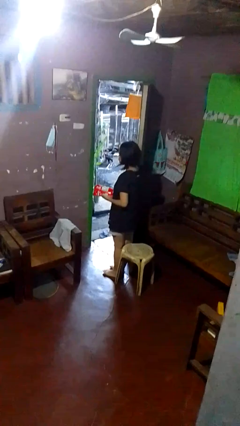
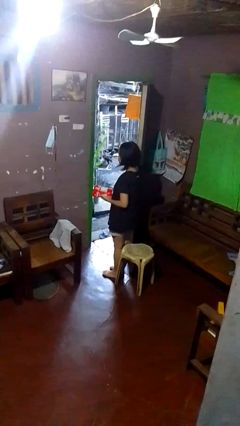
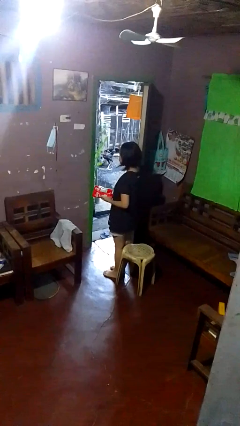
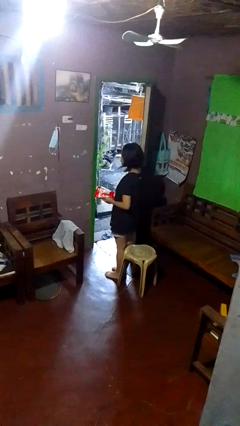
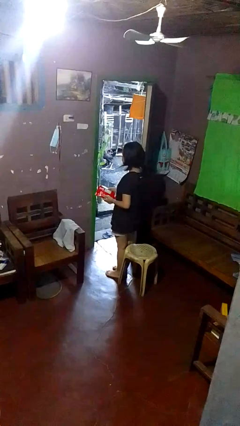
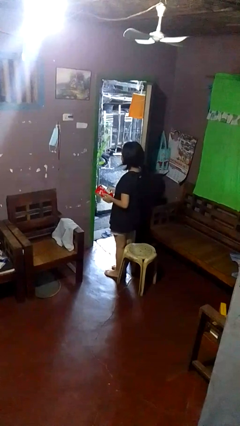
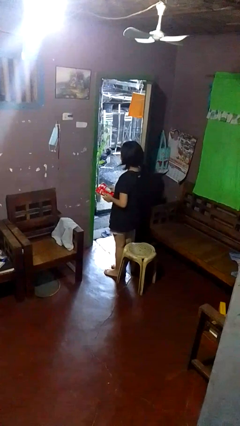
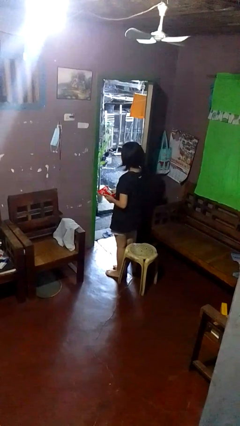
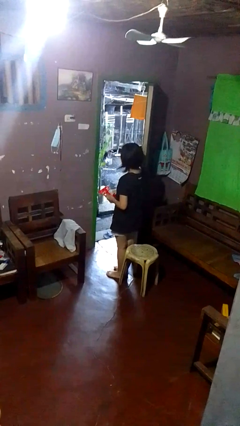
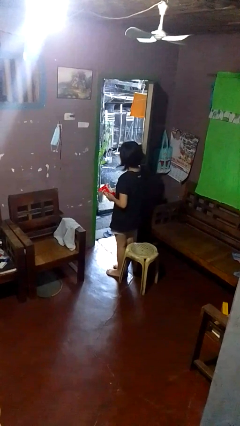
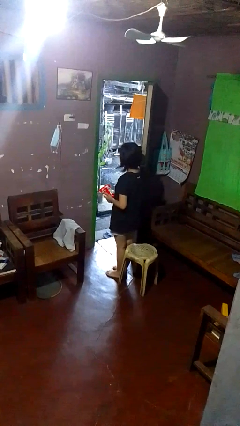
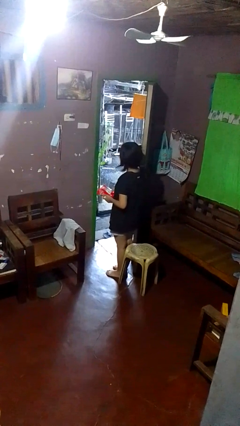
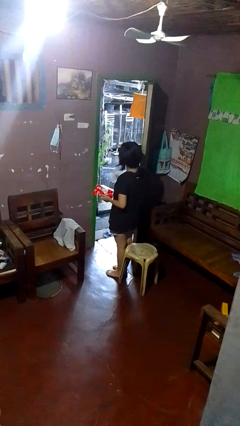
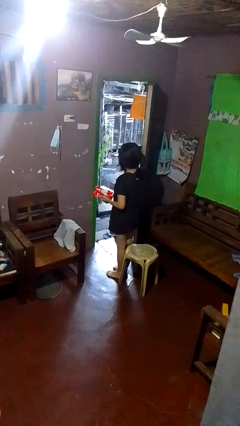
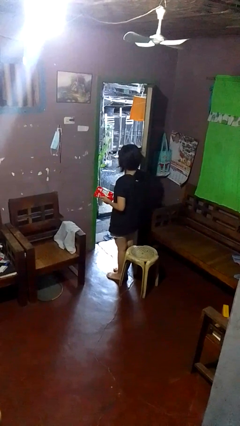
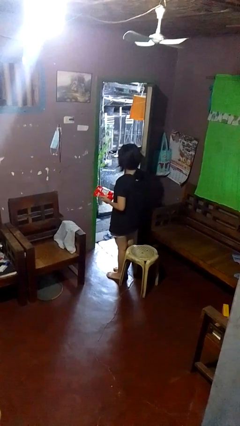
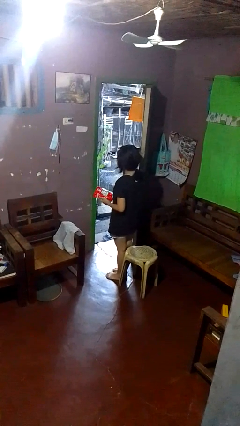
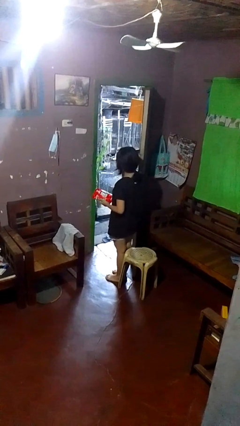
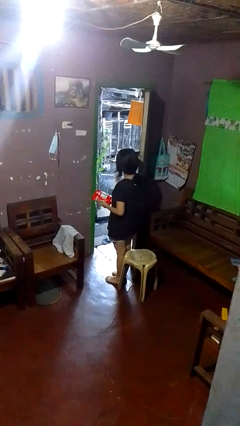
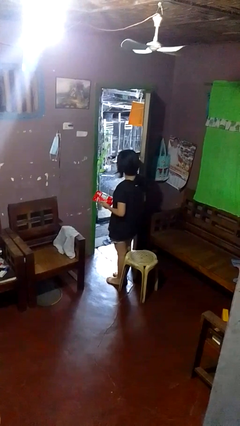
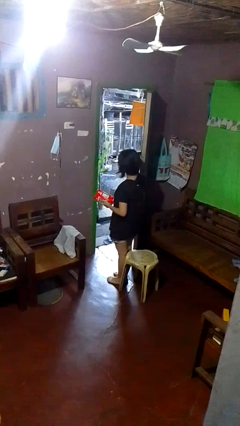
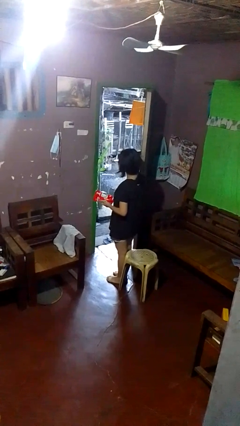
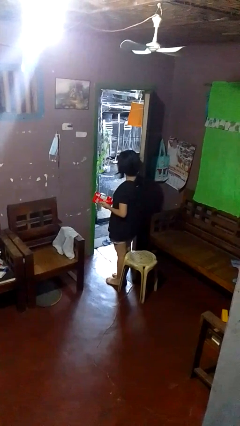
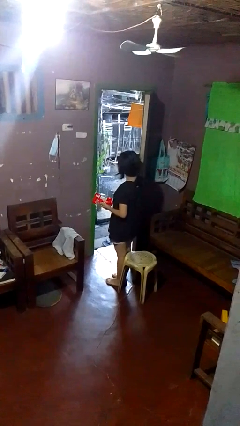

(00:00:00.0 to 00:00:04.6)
person eats snack from bag

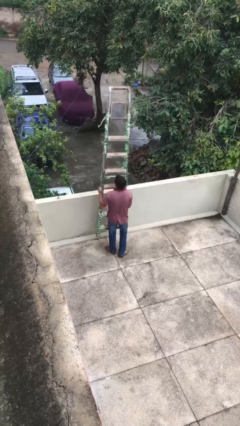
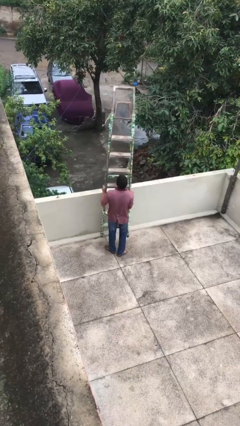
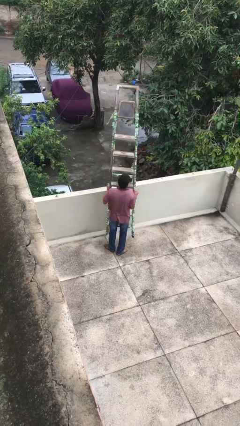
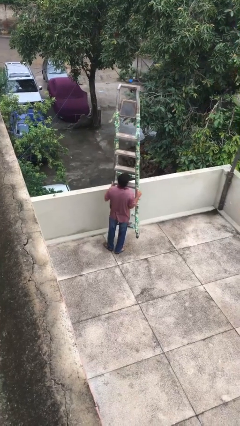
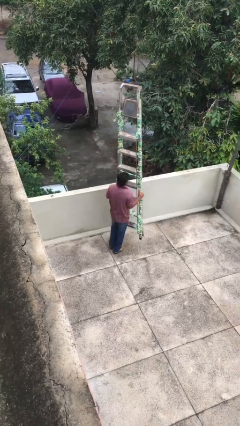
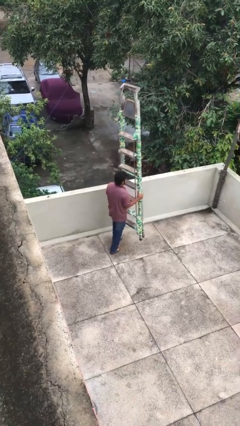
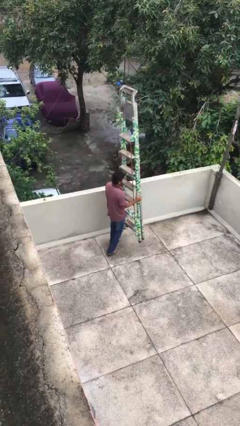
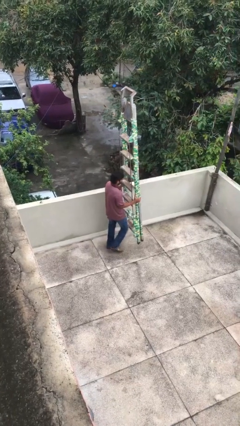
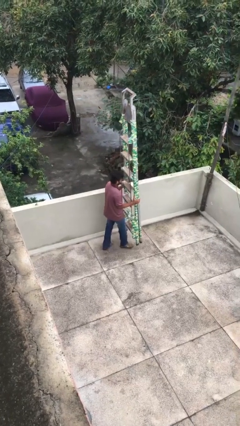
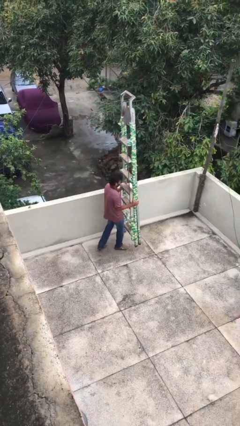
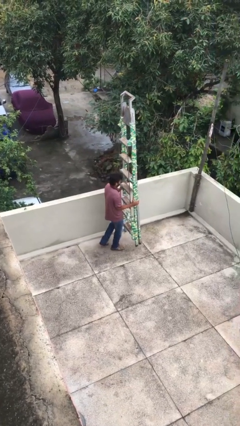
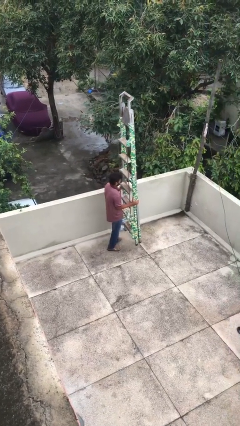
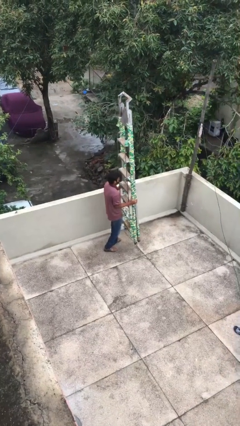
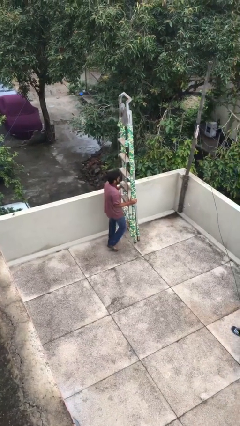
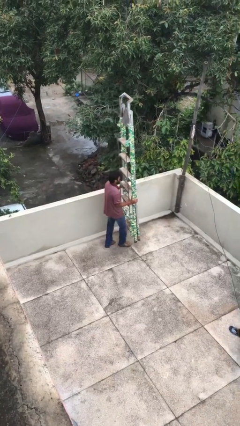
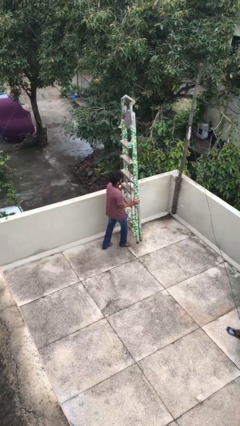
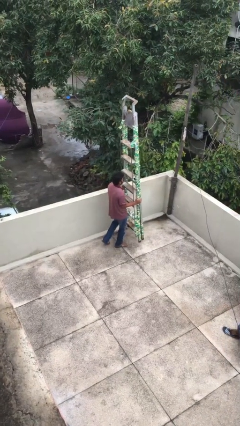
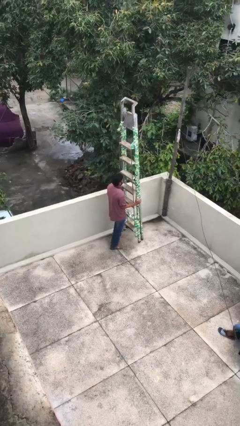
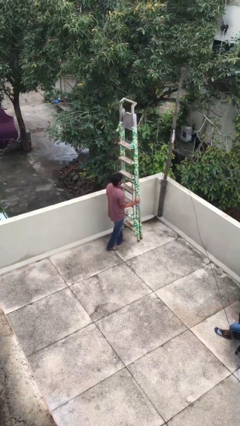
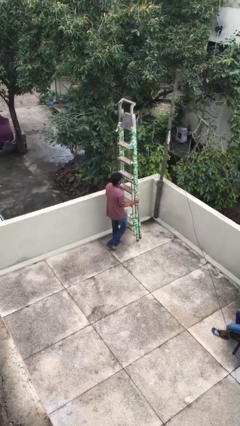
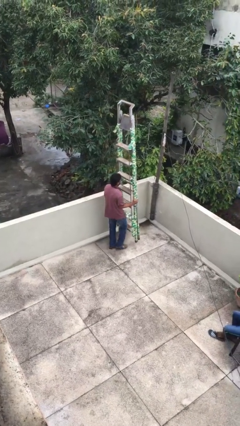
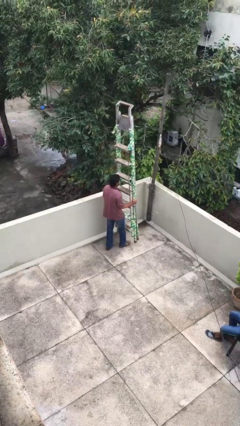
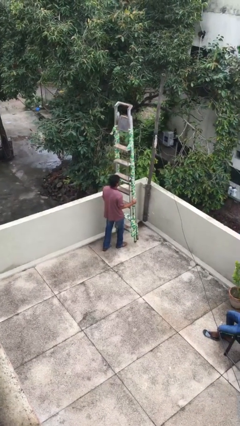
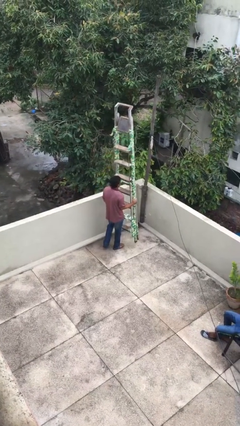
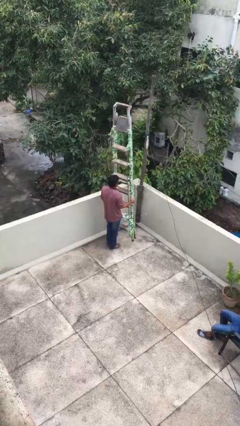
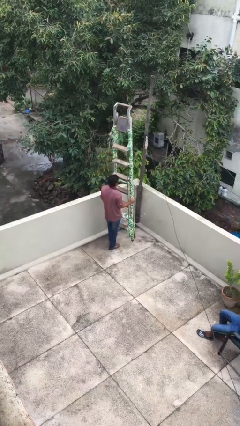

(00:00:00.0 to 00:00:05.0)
person carries heavy object

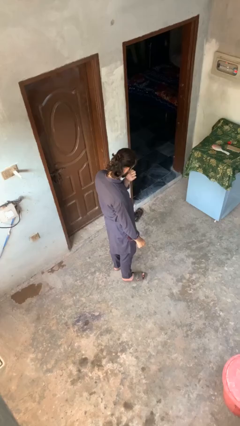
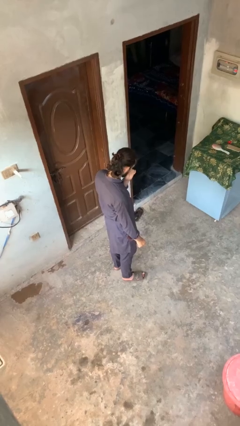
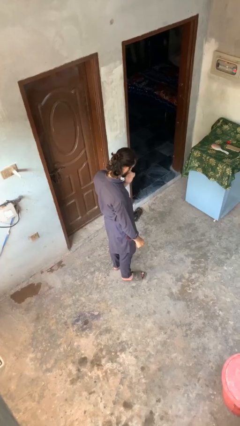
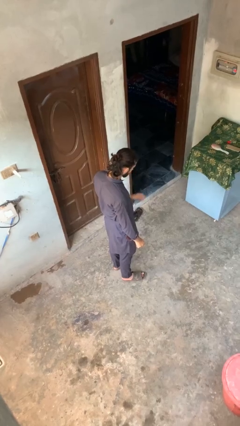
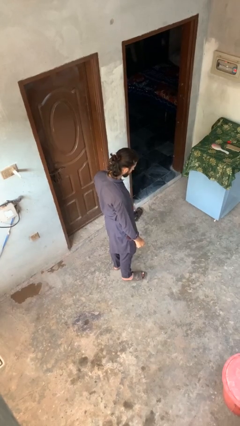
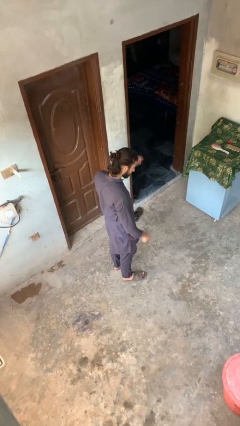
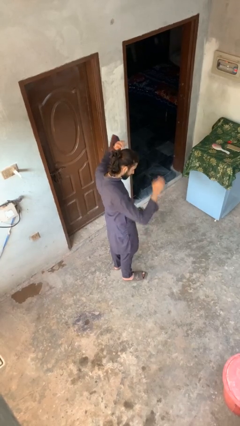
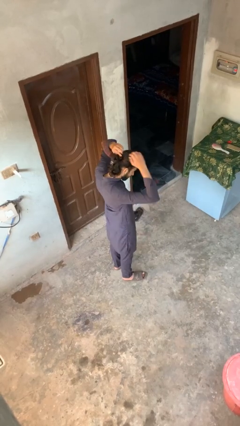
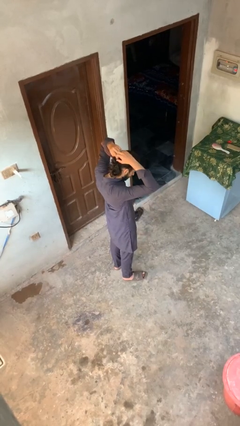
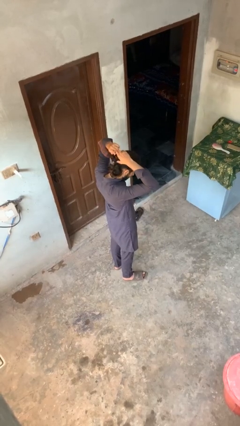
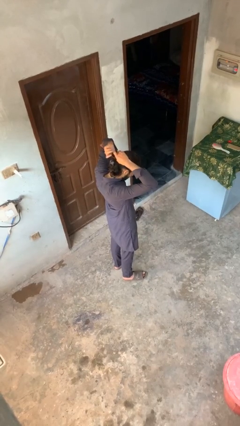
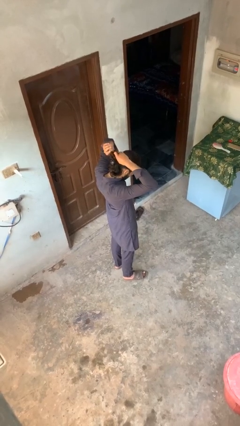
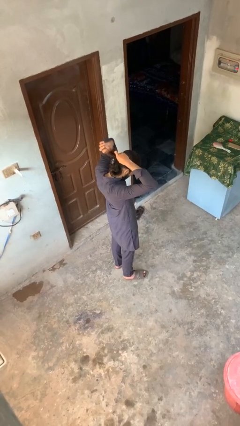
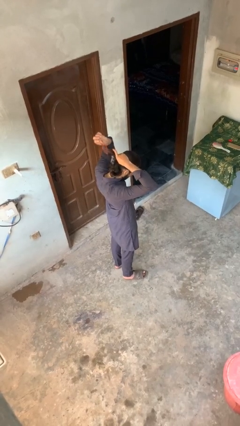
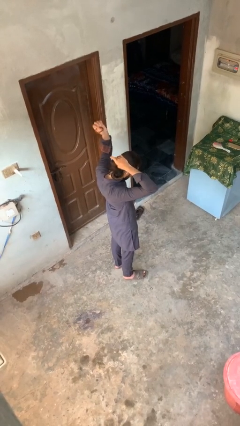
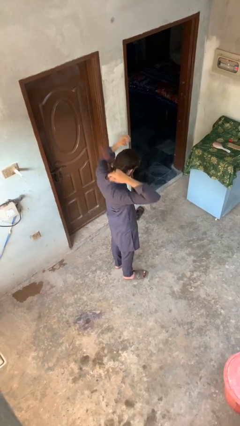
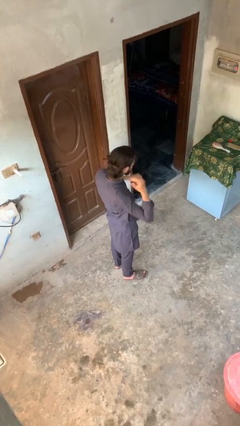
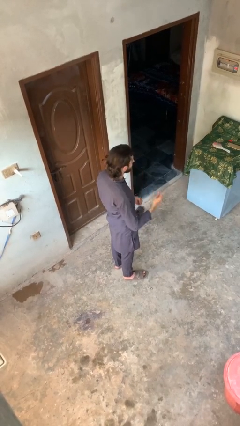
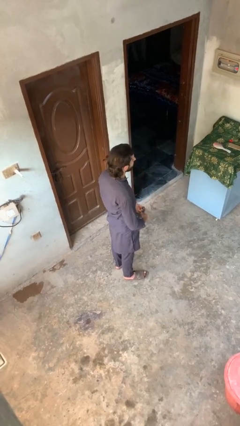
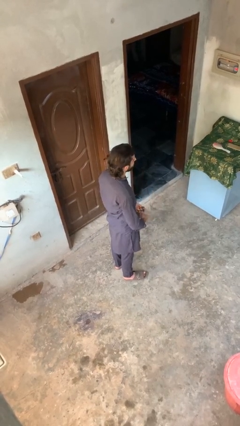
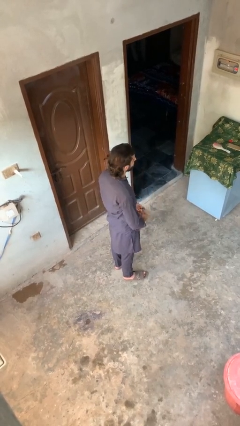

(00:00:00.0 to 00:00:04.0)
person takes off hairtie

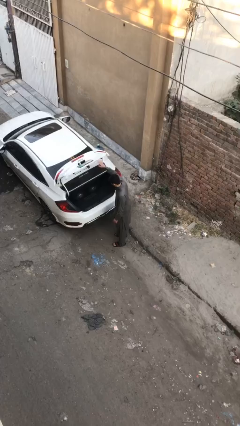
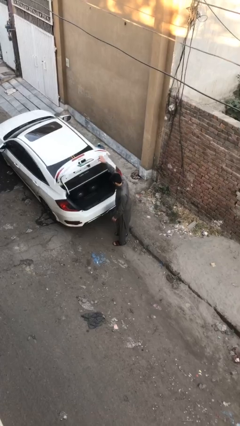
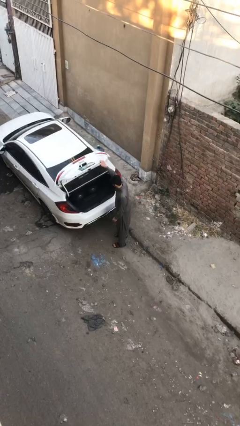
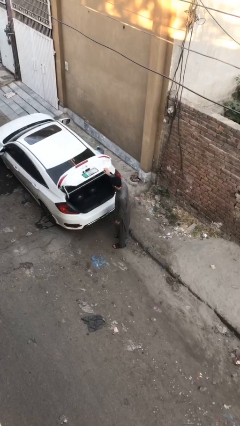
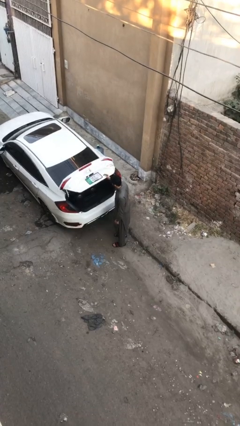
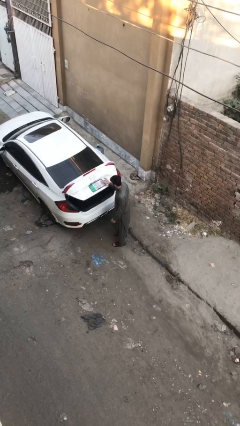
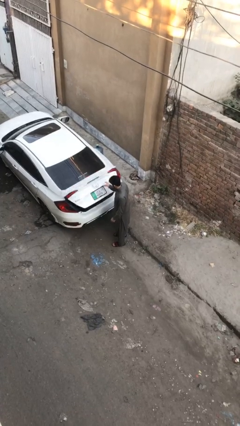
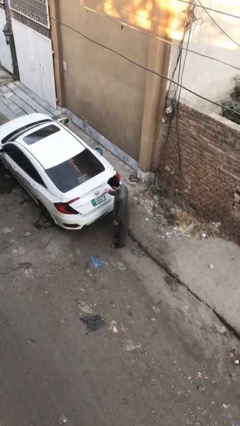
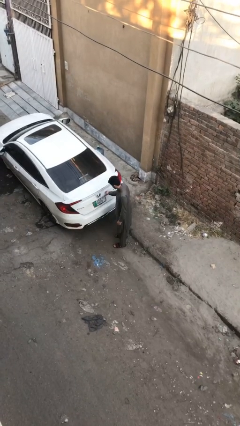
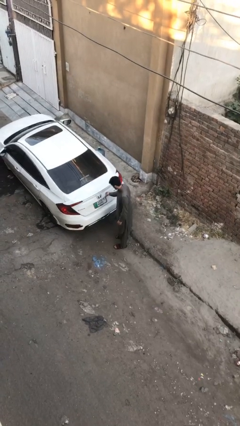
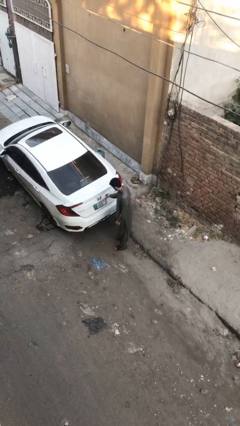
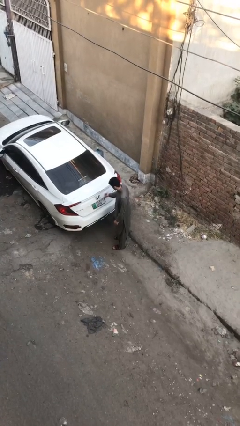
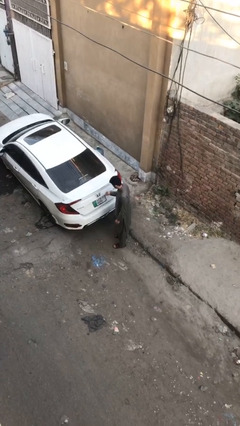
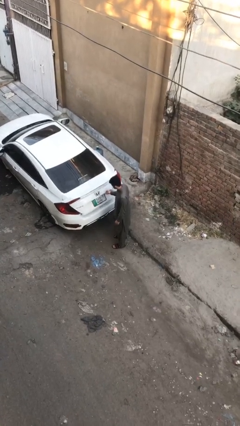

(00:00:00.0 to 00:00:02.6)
person closes car trunk

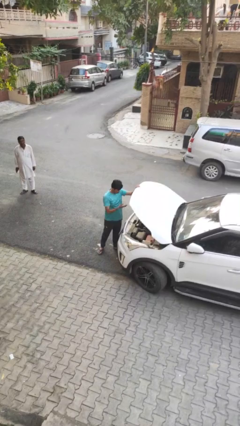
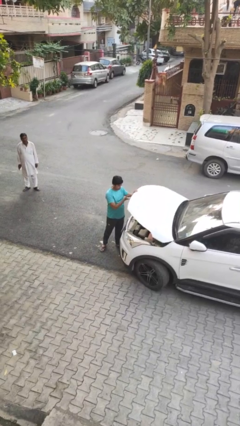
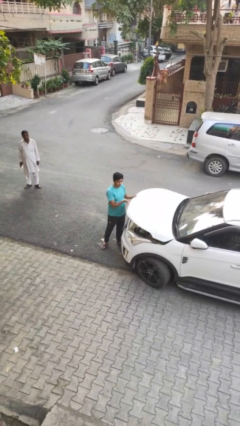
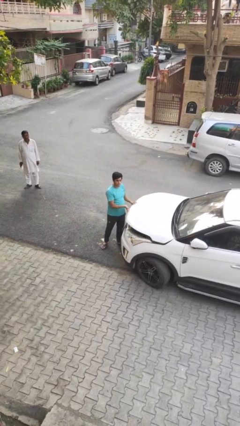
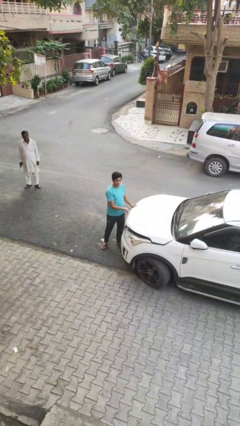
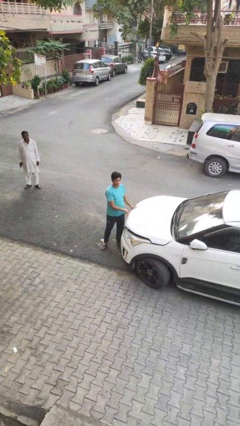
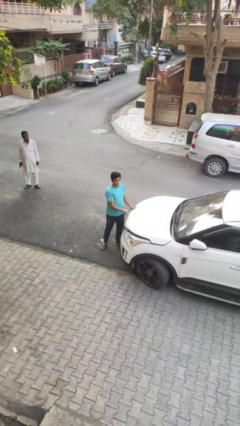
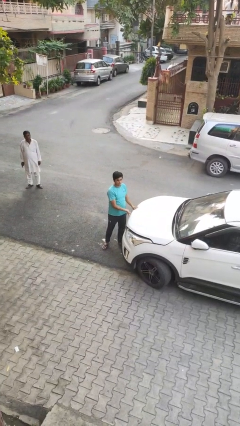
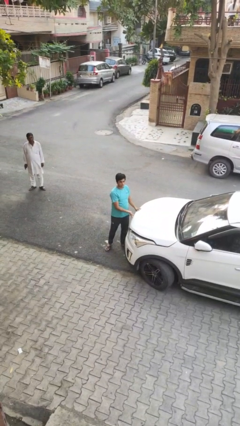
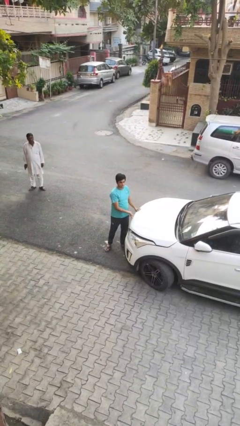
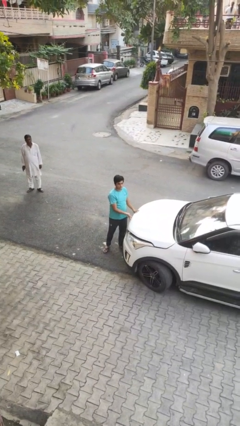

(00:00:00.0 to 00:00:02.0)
person closes car hood
